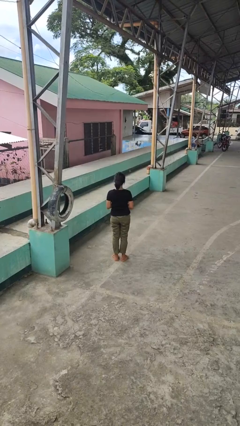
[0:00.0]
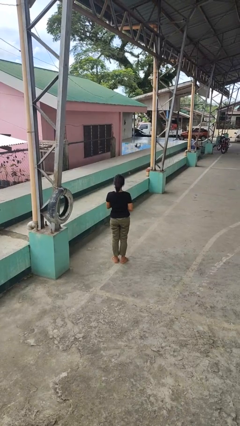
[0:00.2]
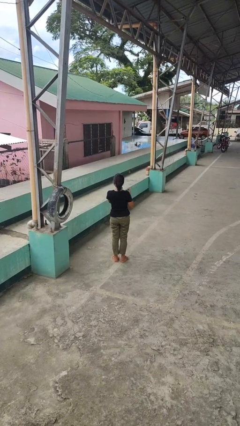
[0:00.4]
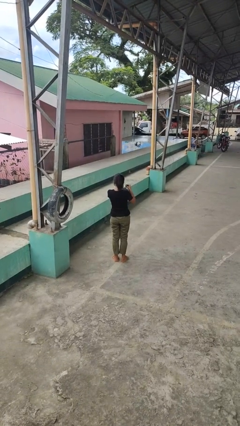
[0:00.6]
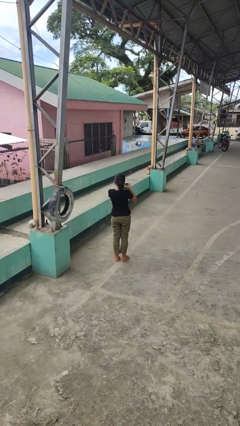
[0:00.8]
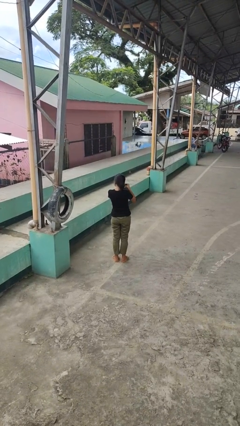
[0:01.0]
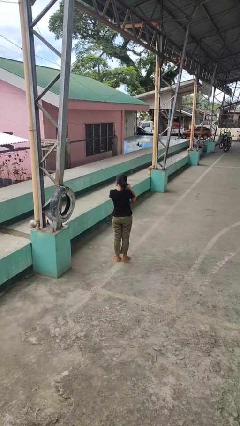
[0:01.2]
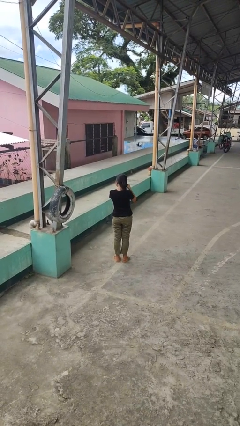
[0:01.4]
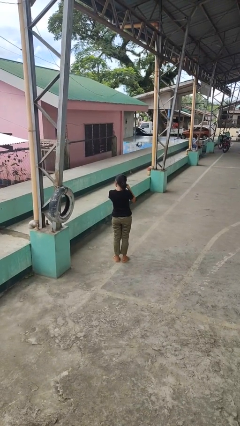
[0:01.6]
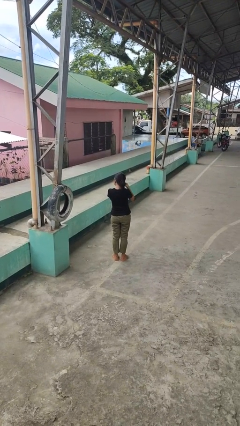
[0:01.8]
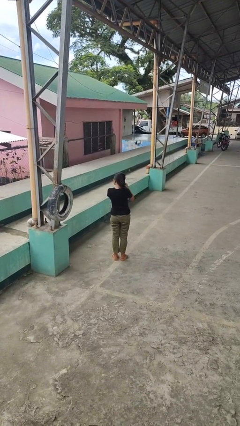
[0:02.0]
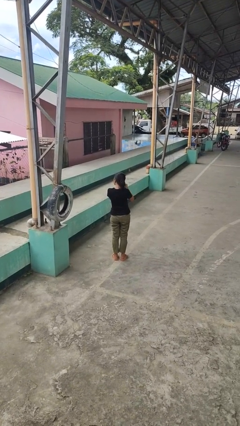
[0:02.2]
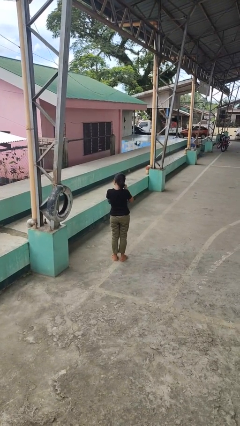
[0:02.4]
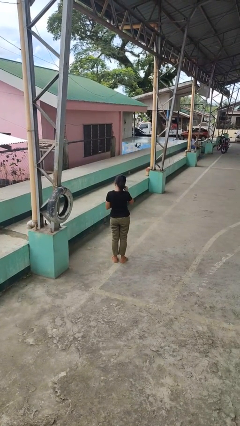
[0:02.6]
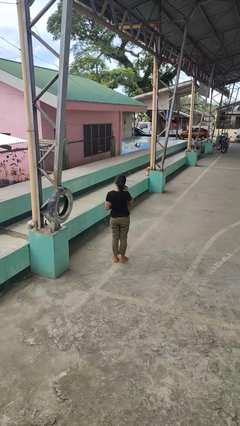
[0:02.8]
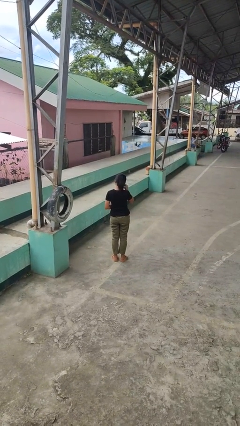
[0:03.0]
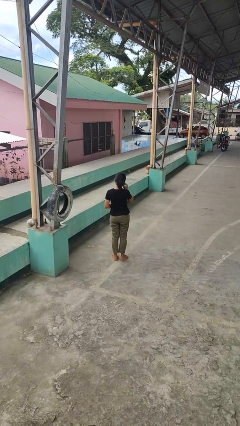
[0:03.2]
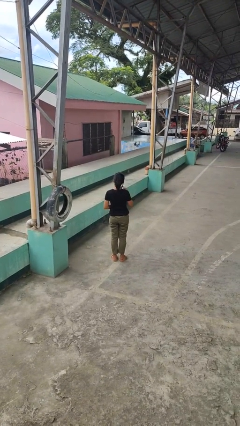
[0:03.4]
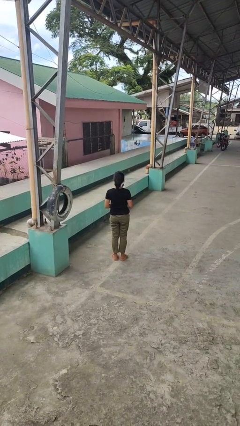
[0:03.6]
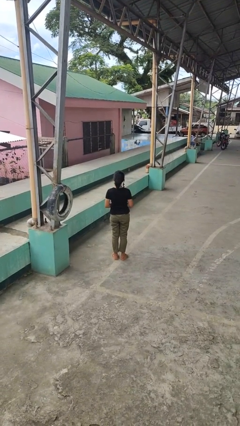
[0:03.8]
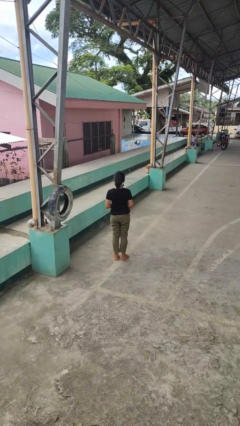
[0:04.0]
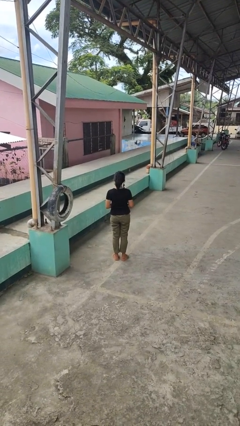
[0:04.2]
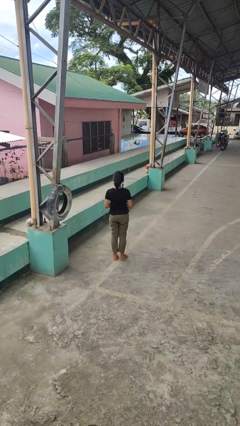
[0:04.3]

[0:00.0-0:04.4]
person puts on earrings

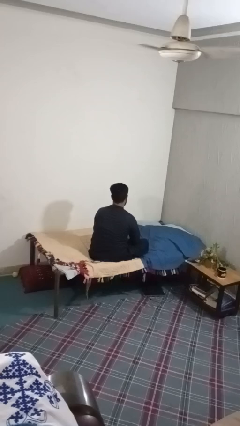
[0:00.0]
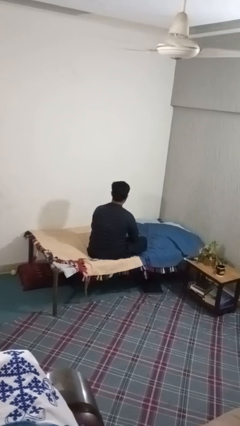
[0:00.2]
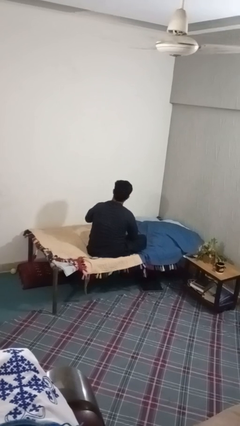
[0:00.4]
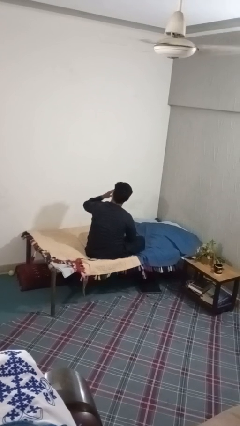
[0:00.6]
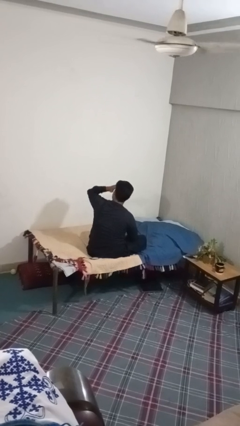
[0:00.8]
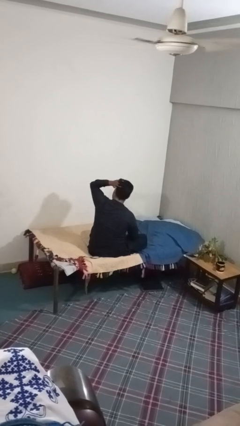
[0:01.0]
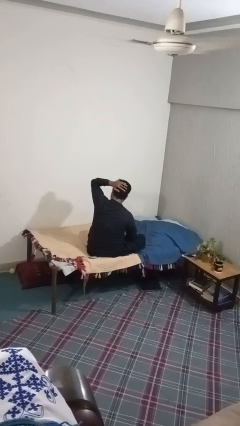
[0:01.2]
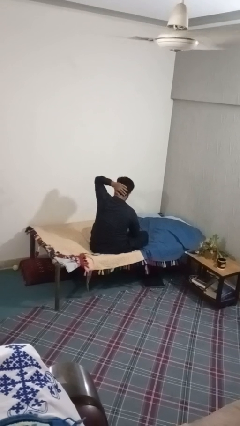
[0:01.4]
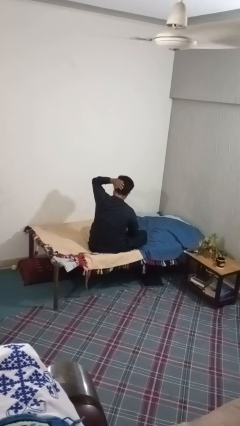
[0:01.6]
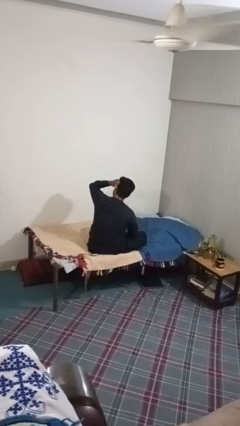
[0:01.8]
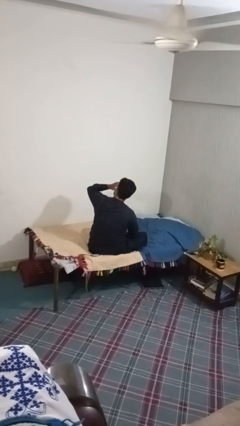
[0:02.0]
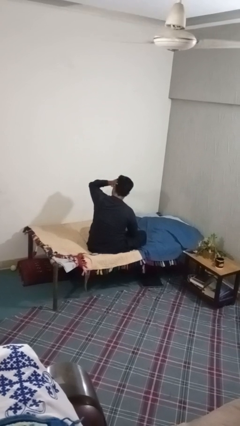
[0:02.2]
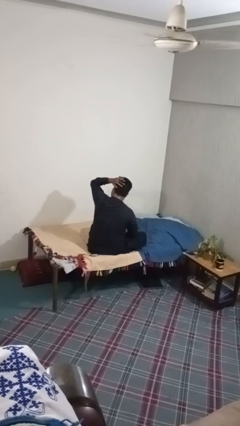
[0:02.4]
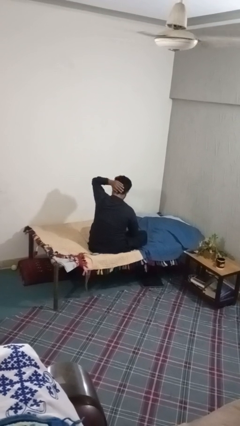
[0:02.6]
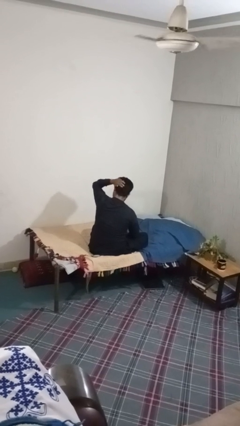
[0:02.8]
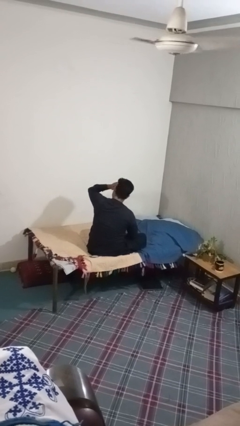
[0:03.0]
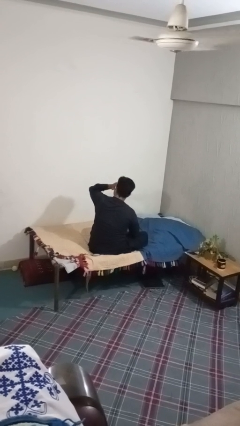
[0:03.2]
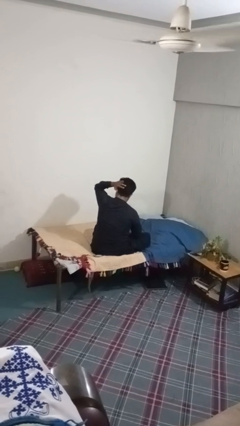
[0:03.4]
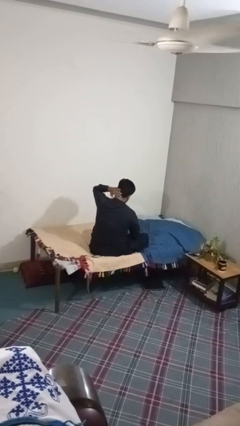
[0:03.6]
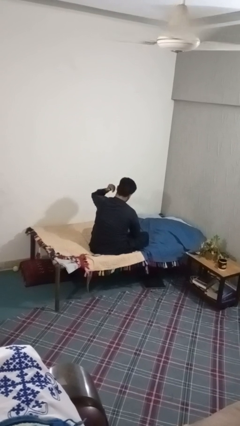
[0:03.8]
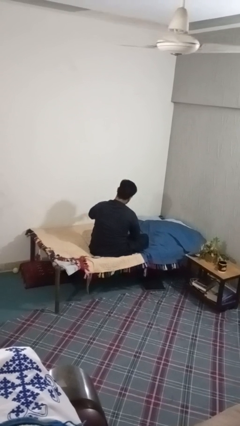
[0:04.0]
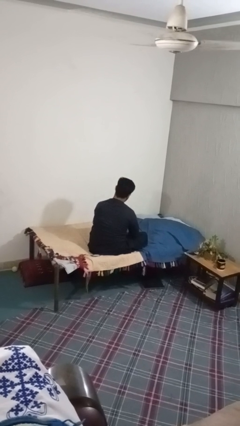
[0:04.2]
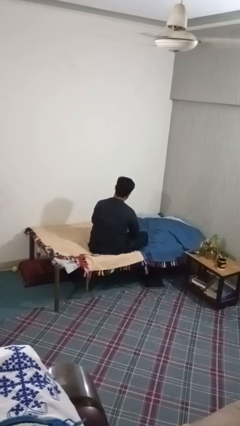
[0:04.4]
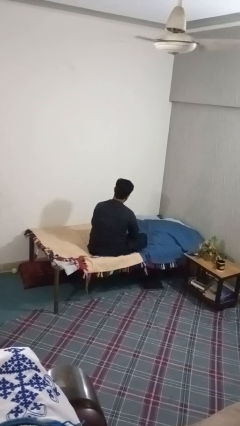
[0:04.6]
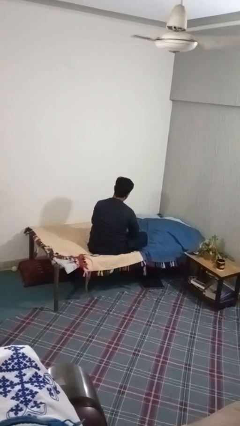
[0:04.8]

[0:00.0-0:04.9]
person strokes hair

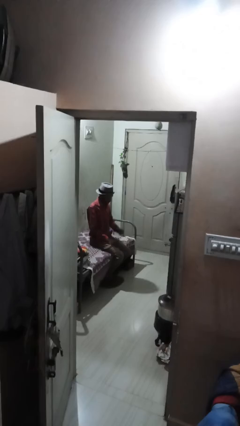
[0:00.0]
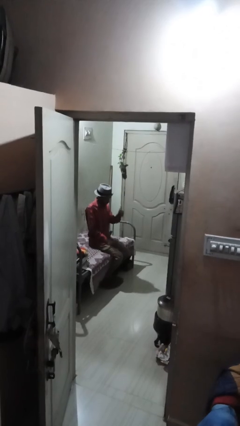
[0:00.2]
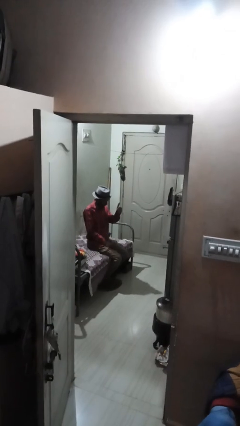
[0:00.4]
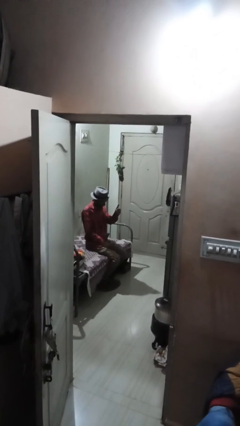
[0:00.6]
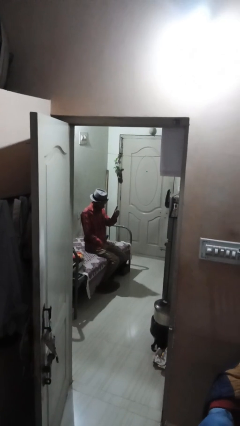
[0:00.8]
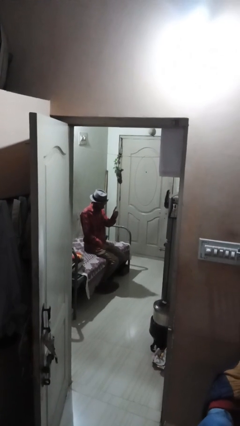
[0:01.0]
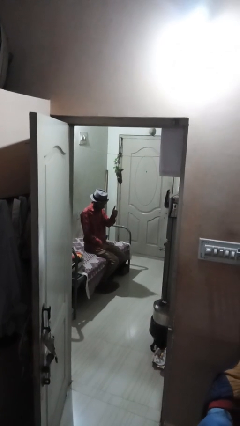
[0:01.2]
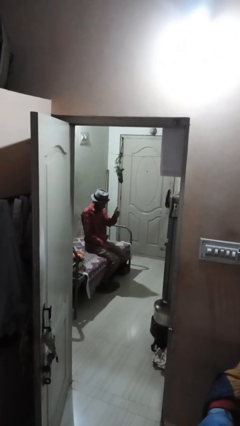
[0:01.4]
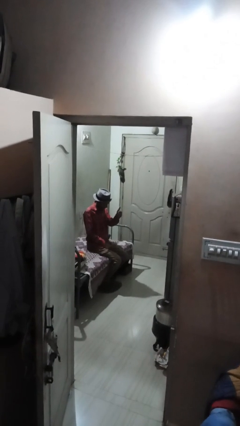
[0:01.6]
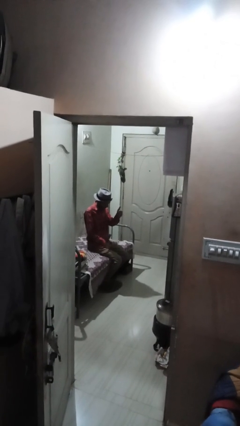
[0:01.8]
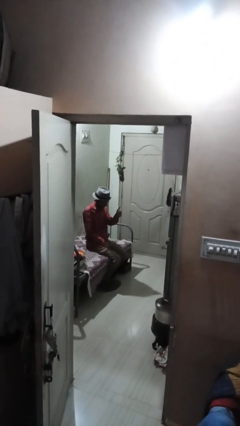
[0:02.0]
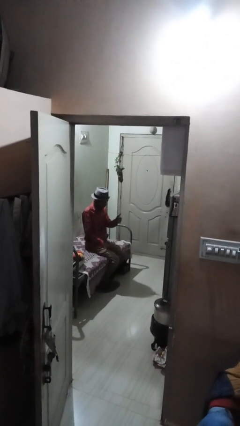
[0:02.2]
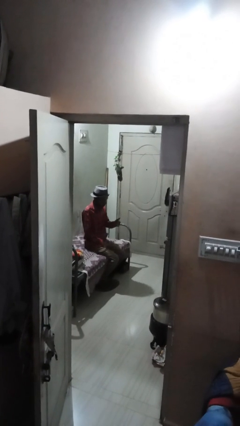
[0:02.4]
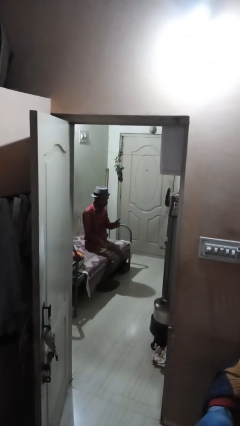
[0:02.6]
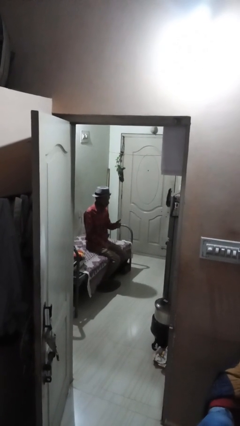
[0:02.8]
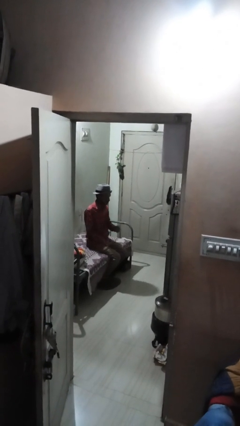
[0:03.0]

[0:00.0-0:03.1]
person gestures thumbs up

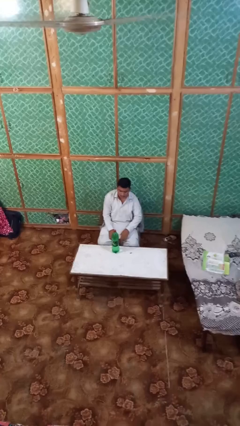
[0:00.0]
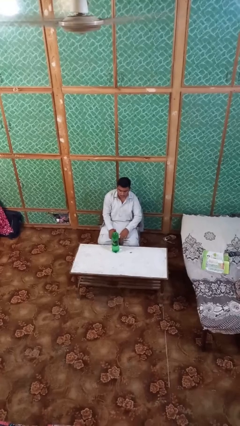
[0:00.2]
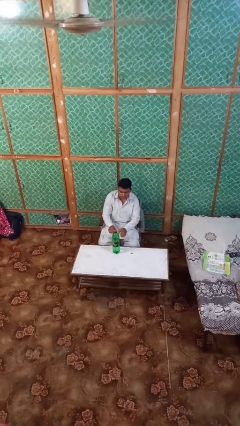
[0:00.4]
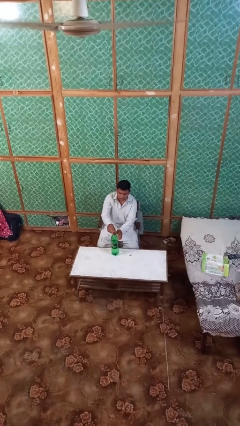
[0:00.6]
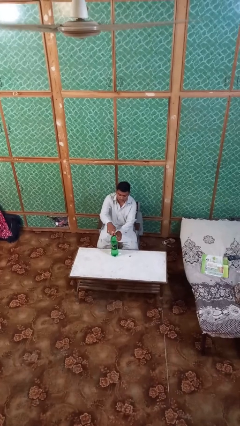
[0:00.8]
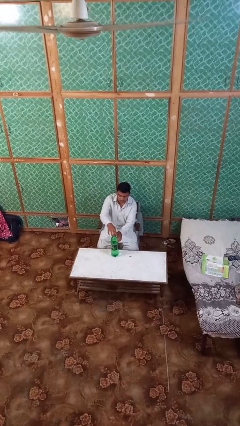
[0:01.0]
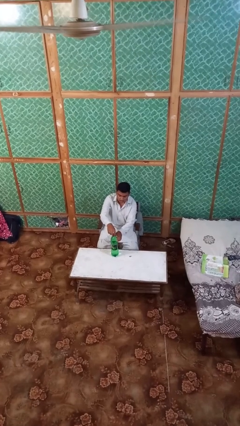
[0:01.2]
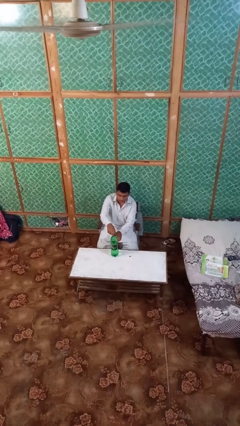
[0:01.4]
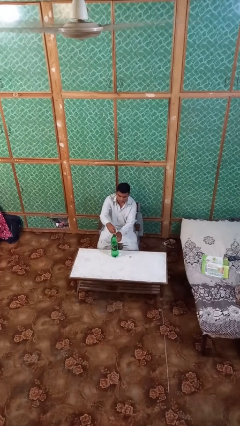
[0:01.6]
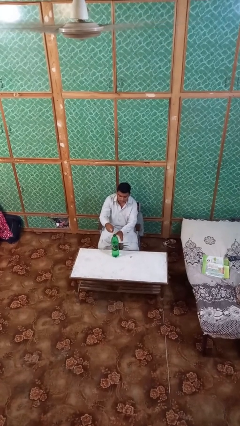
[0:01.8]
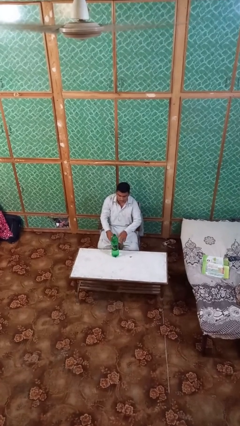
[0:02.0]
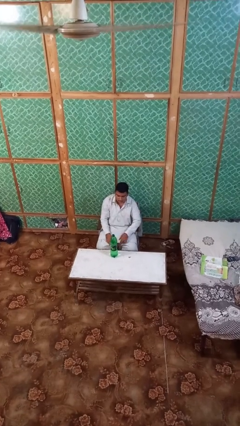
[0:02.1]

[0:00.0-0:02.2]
person unscrews lid from bottle

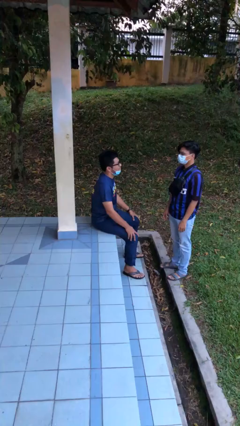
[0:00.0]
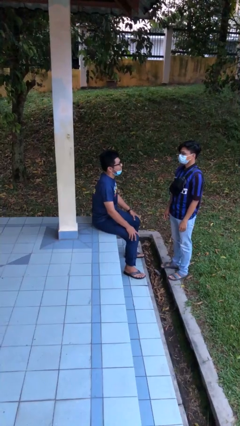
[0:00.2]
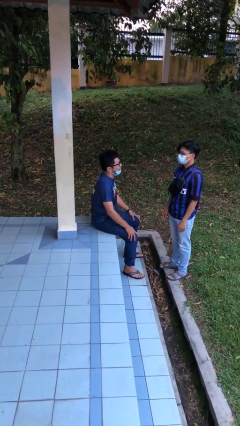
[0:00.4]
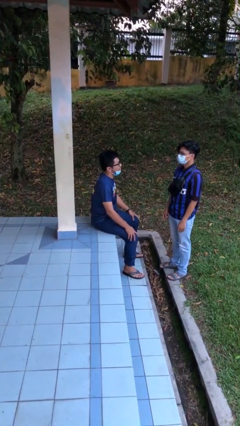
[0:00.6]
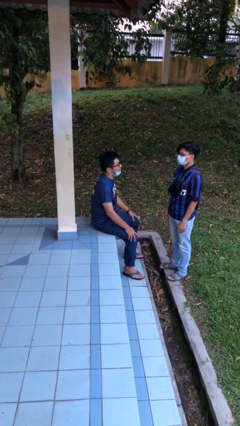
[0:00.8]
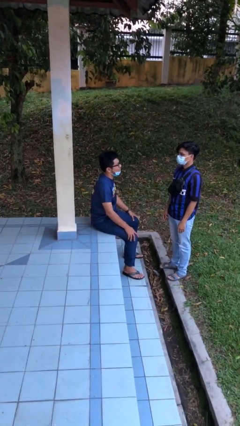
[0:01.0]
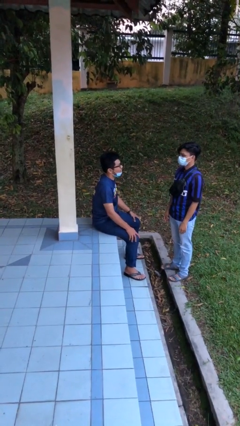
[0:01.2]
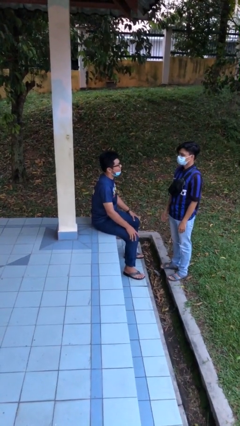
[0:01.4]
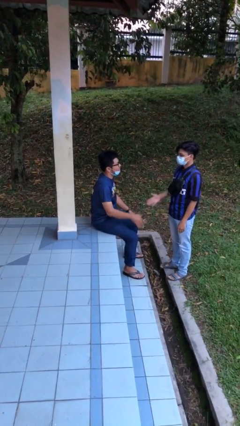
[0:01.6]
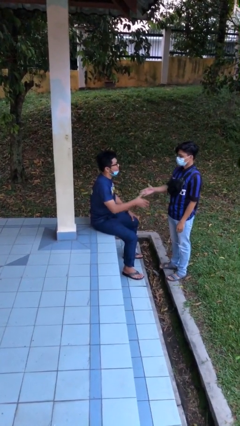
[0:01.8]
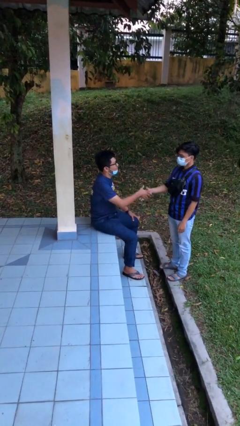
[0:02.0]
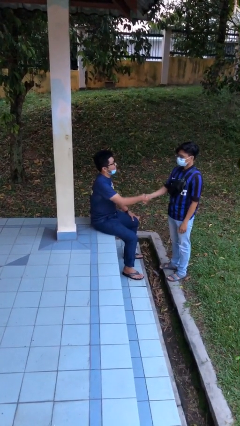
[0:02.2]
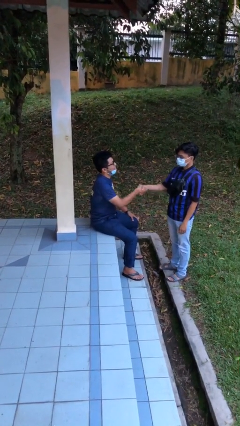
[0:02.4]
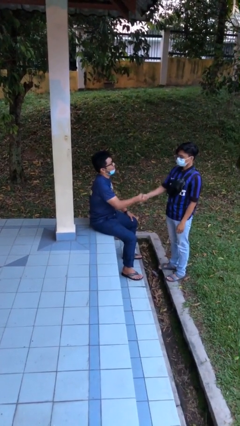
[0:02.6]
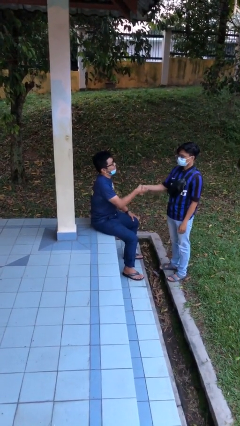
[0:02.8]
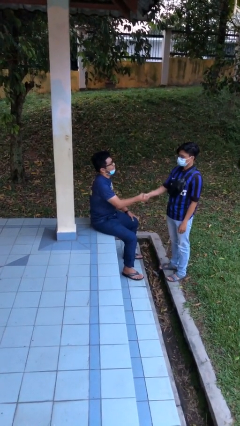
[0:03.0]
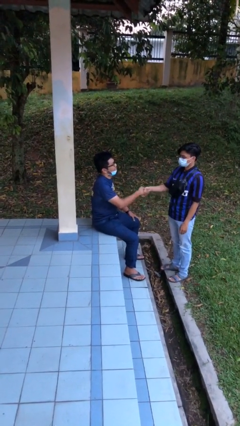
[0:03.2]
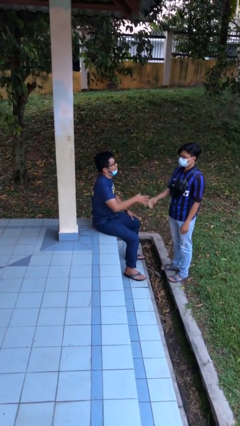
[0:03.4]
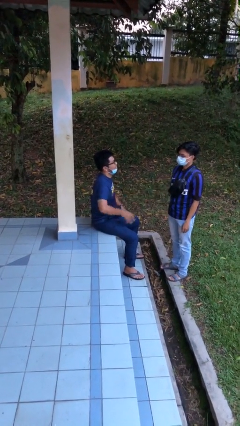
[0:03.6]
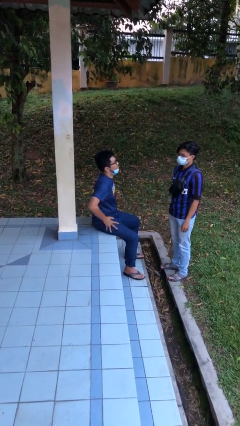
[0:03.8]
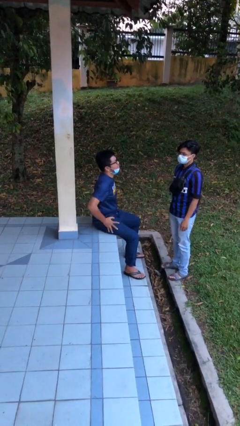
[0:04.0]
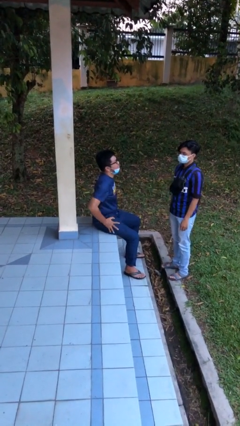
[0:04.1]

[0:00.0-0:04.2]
person shakes hand
